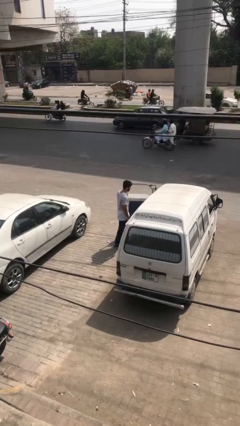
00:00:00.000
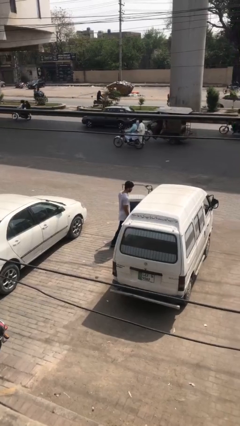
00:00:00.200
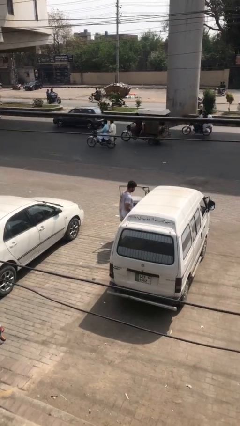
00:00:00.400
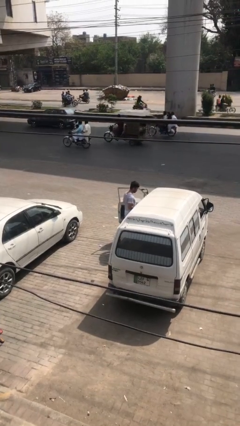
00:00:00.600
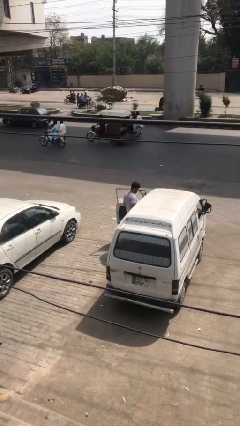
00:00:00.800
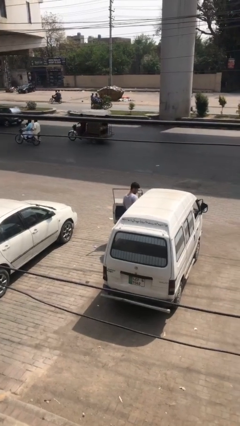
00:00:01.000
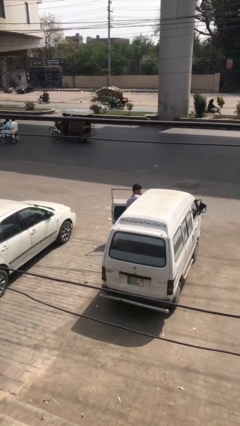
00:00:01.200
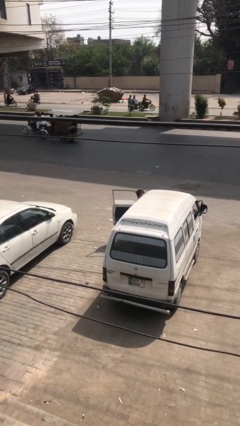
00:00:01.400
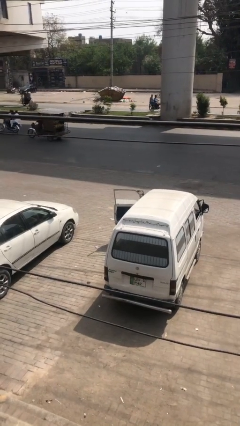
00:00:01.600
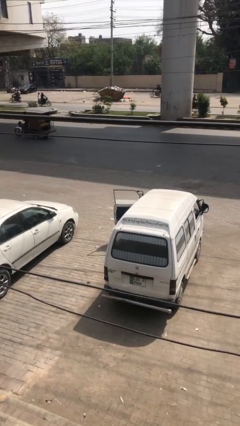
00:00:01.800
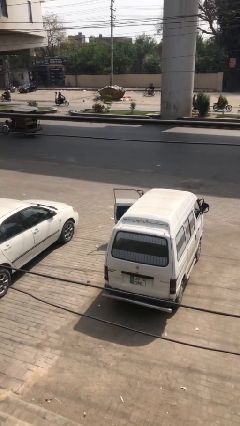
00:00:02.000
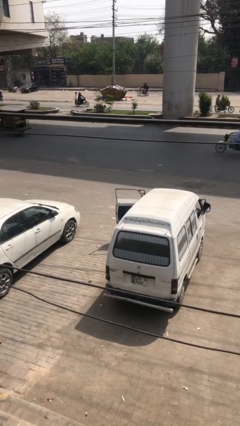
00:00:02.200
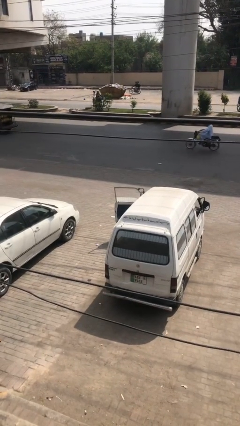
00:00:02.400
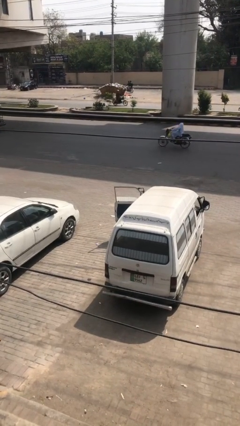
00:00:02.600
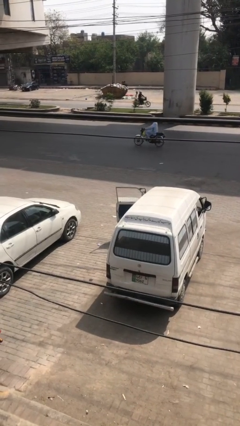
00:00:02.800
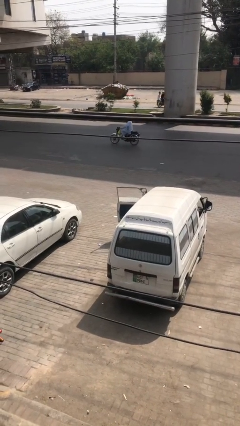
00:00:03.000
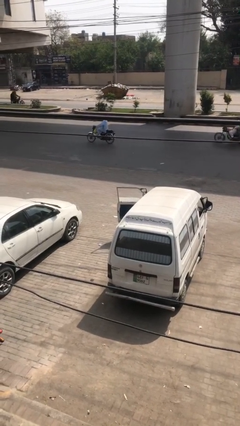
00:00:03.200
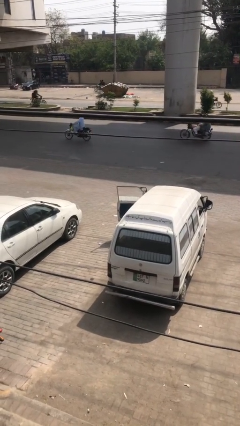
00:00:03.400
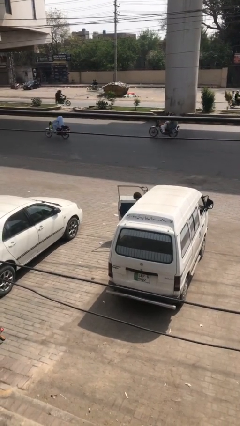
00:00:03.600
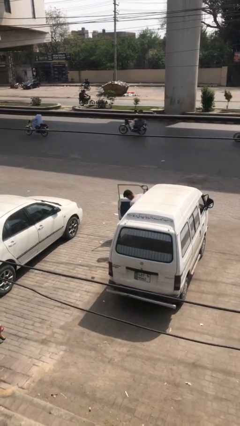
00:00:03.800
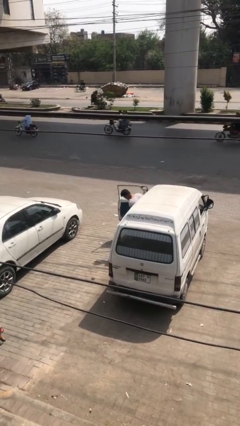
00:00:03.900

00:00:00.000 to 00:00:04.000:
person enters car

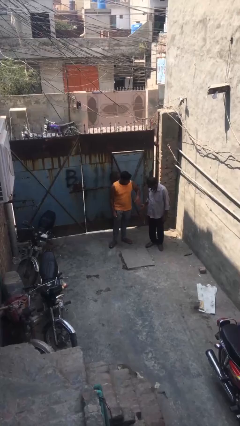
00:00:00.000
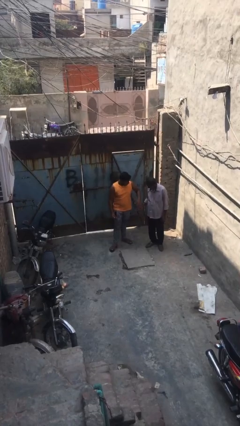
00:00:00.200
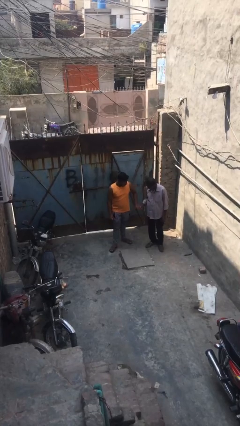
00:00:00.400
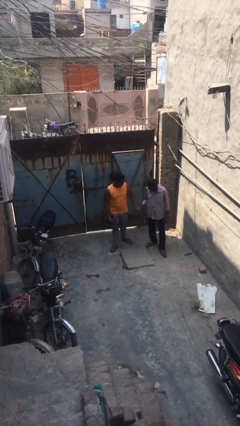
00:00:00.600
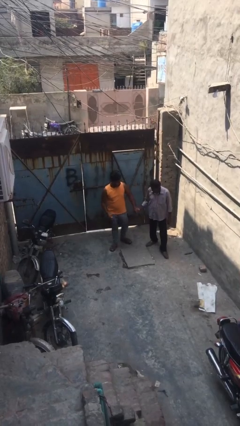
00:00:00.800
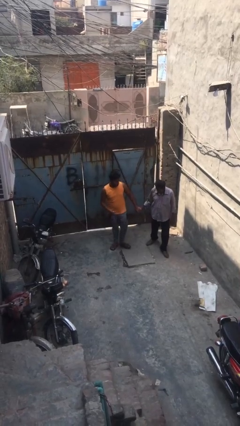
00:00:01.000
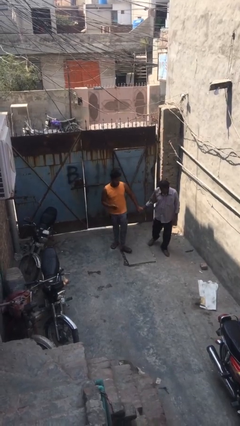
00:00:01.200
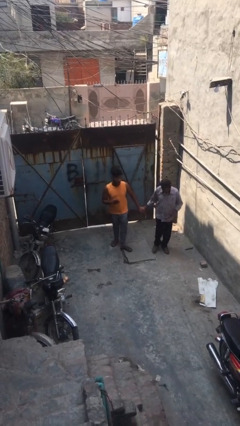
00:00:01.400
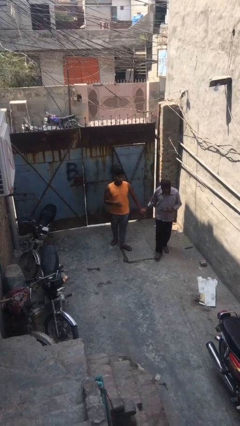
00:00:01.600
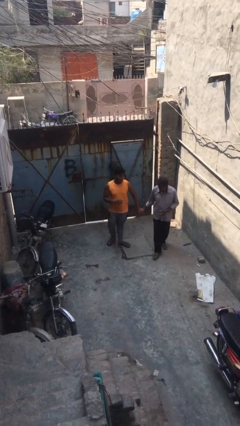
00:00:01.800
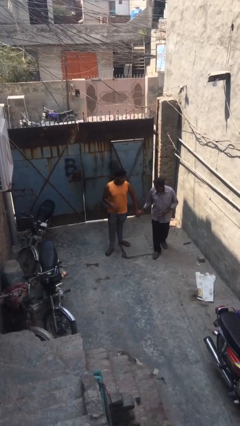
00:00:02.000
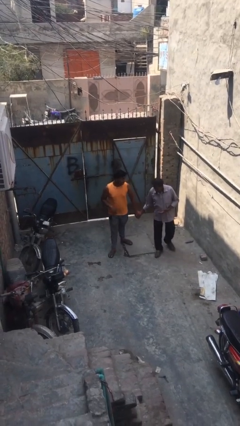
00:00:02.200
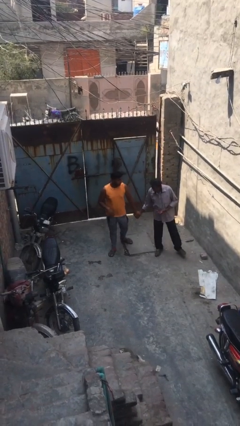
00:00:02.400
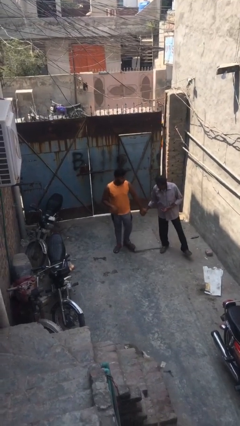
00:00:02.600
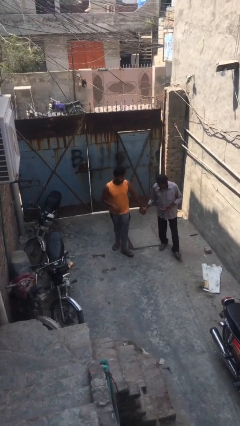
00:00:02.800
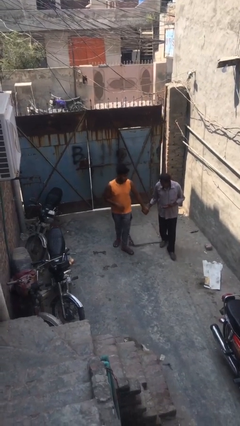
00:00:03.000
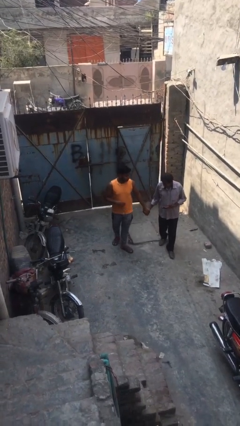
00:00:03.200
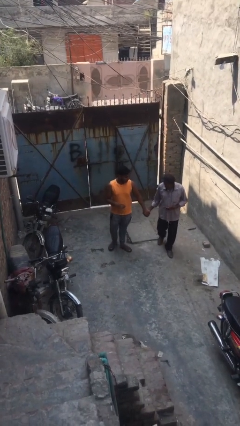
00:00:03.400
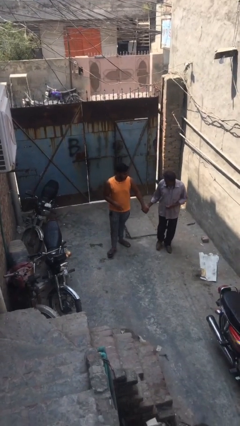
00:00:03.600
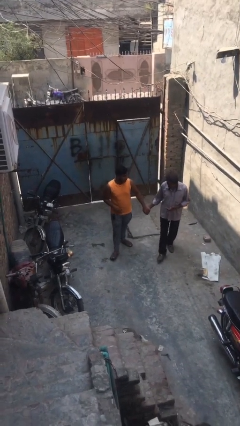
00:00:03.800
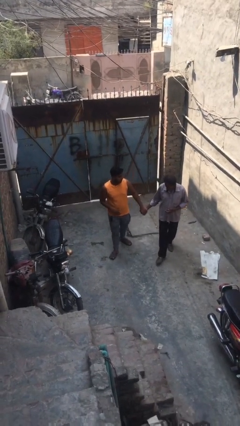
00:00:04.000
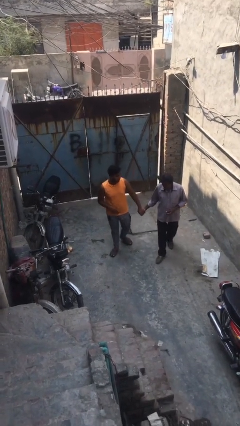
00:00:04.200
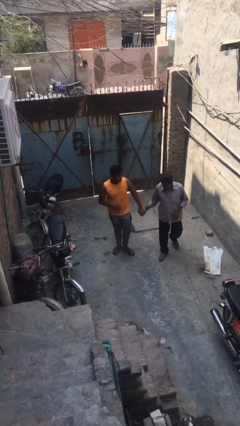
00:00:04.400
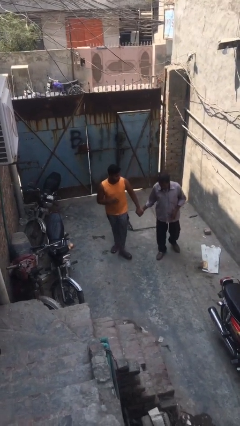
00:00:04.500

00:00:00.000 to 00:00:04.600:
person holds hand

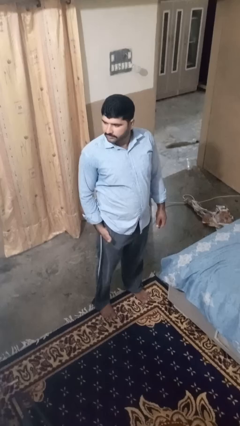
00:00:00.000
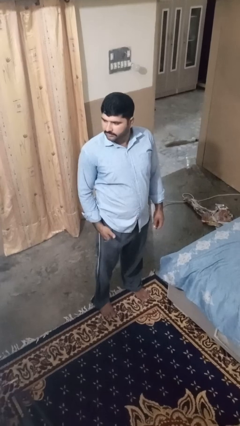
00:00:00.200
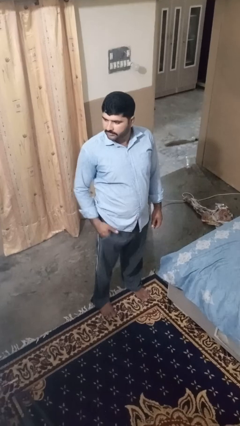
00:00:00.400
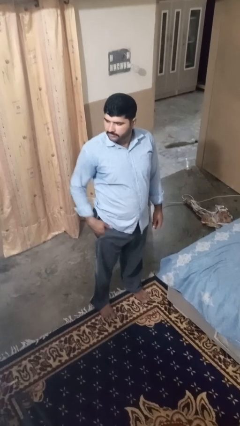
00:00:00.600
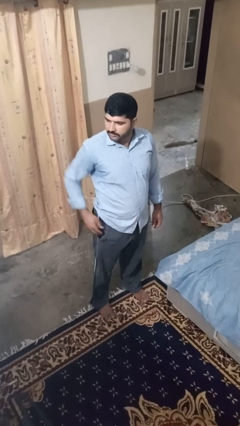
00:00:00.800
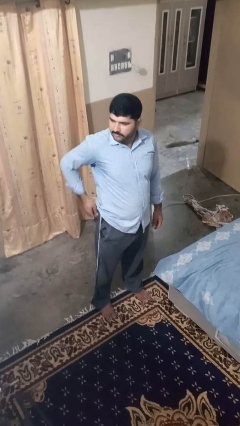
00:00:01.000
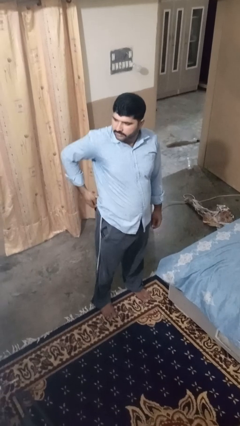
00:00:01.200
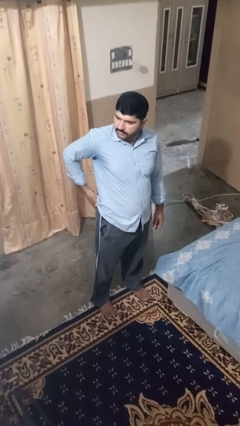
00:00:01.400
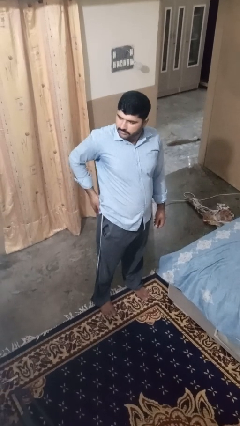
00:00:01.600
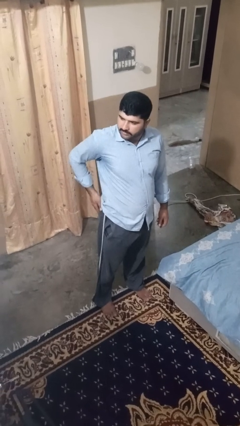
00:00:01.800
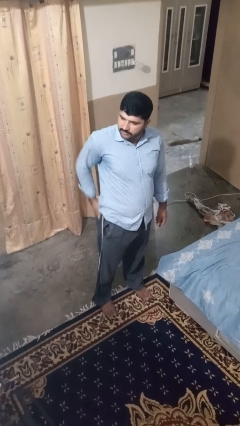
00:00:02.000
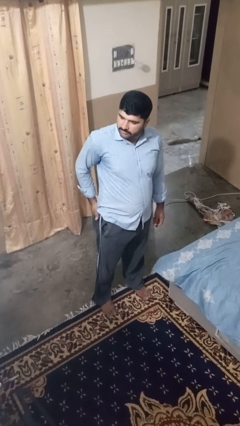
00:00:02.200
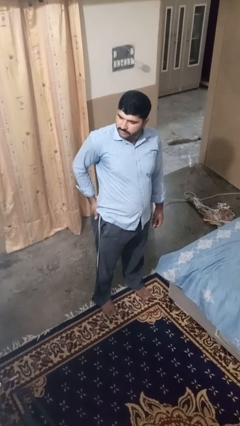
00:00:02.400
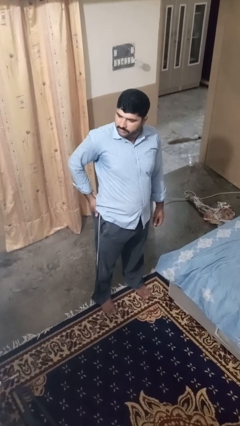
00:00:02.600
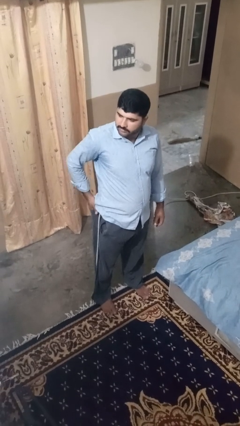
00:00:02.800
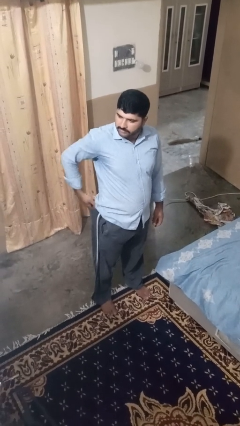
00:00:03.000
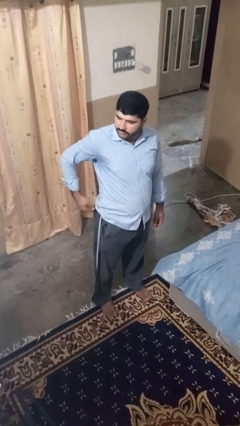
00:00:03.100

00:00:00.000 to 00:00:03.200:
person puts hands in back pockets

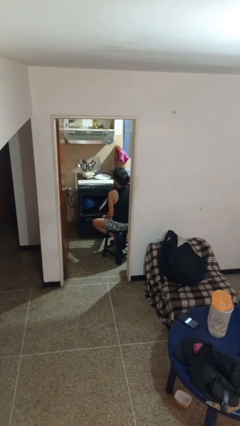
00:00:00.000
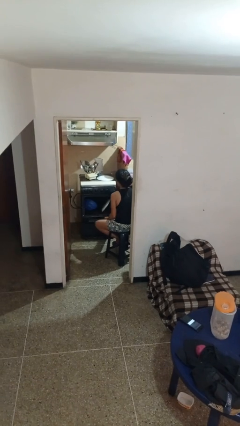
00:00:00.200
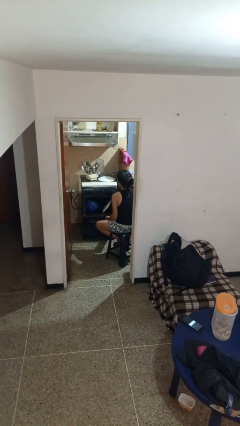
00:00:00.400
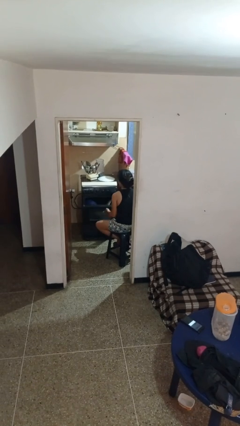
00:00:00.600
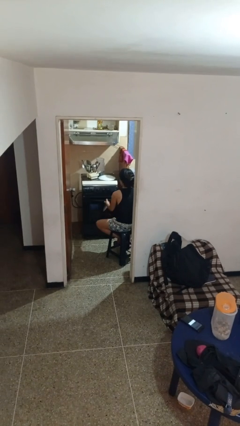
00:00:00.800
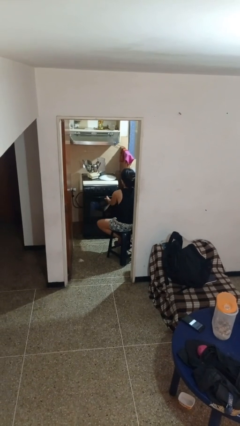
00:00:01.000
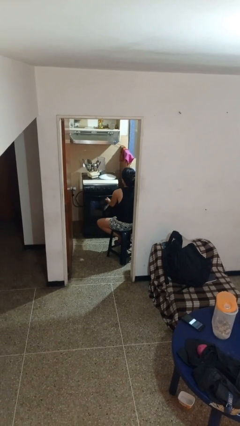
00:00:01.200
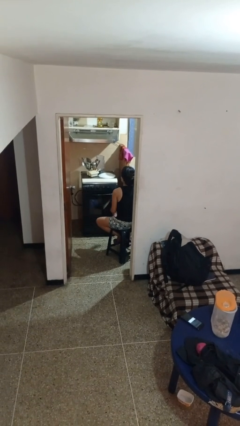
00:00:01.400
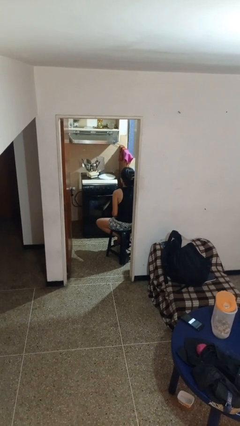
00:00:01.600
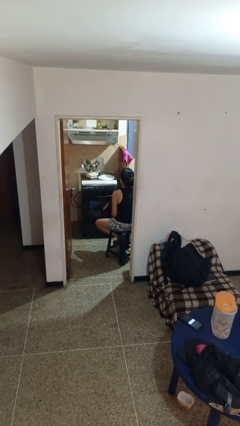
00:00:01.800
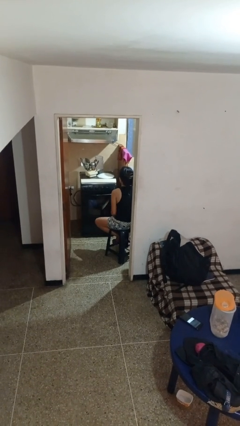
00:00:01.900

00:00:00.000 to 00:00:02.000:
person closes dishwasher

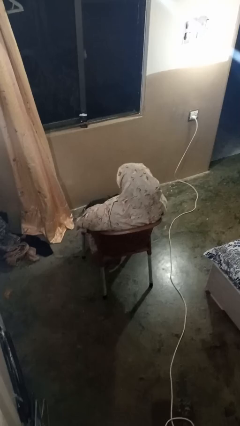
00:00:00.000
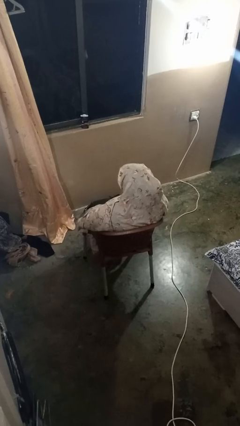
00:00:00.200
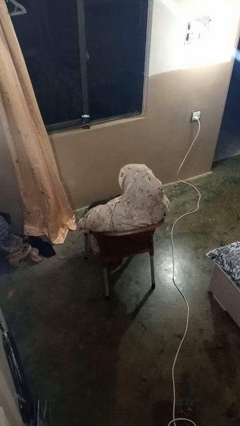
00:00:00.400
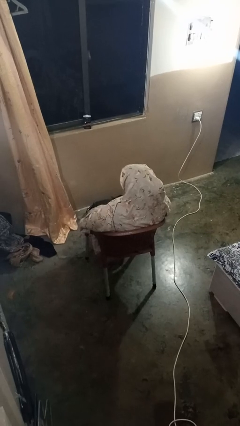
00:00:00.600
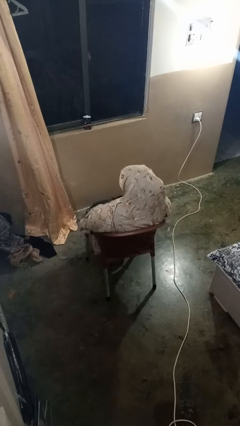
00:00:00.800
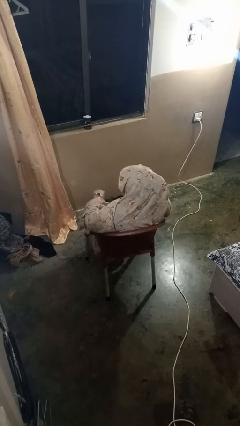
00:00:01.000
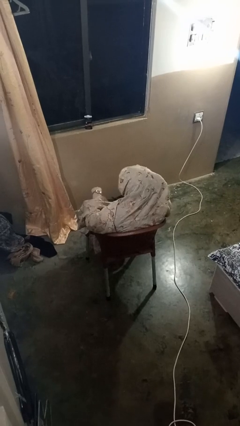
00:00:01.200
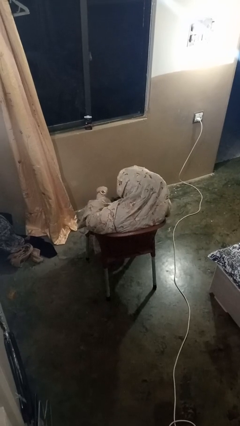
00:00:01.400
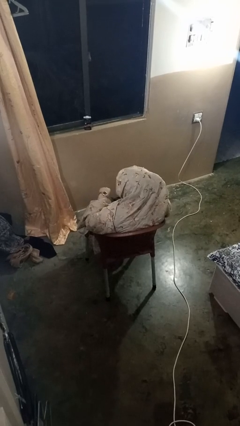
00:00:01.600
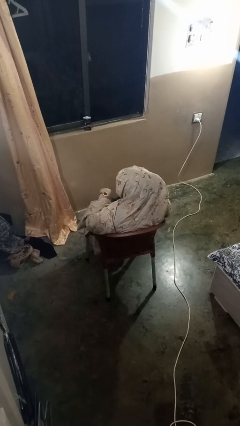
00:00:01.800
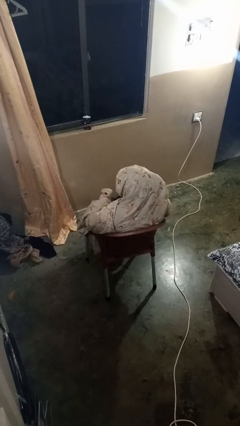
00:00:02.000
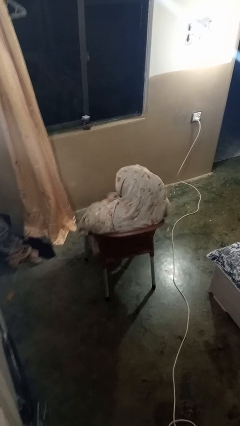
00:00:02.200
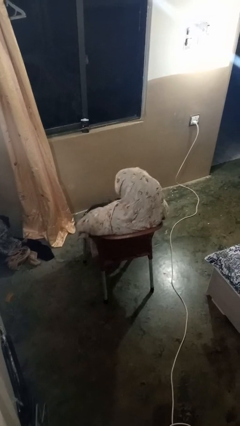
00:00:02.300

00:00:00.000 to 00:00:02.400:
person looks at wristwatch

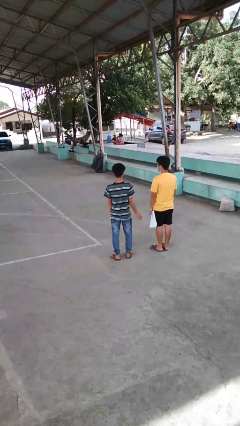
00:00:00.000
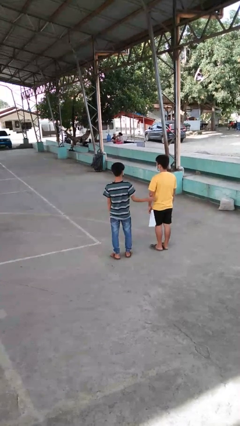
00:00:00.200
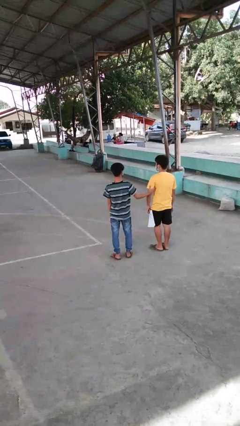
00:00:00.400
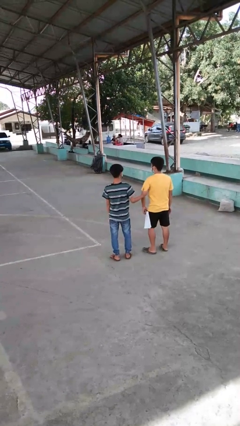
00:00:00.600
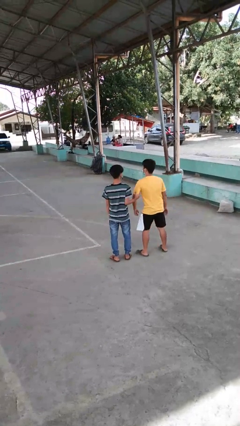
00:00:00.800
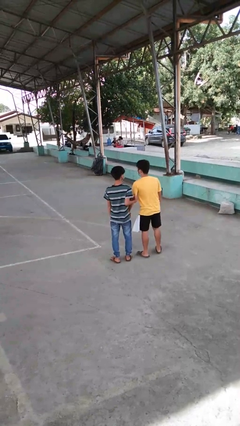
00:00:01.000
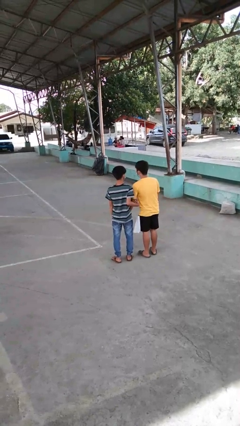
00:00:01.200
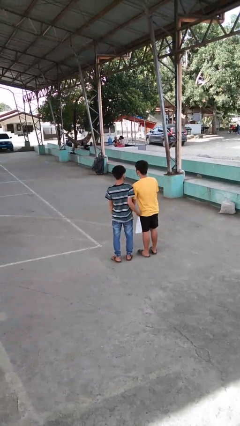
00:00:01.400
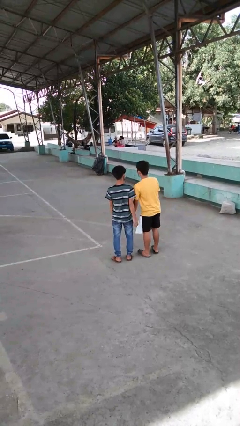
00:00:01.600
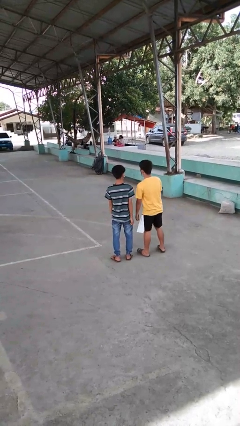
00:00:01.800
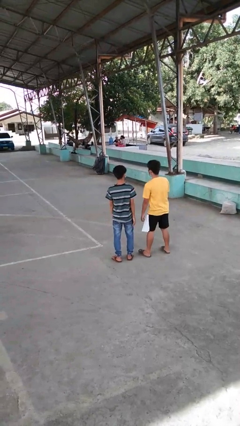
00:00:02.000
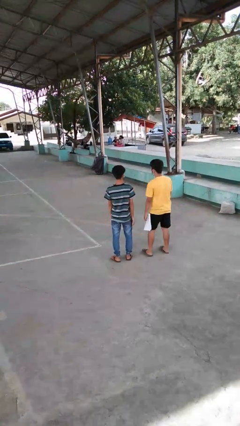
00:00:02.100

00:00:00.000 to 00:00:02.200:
person grabs person by bicep
